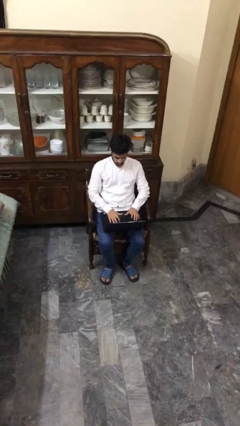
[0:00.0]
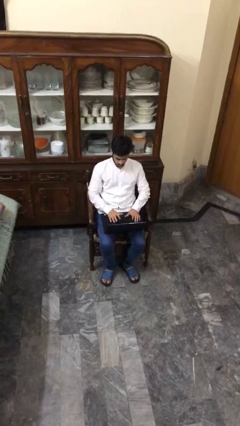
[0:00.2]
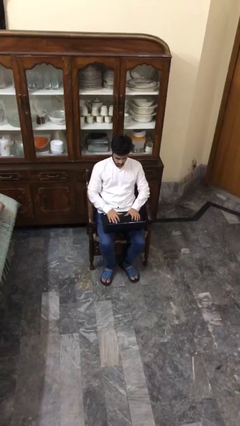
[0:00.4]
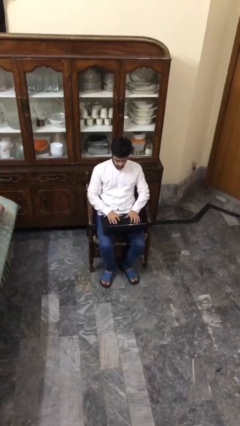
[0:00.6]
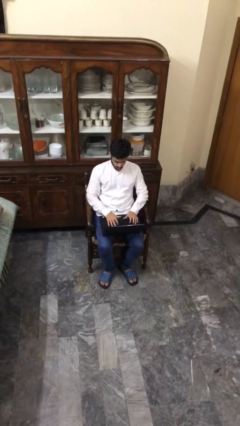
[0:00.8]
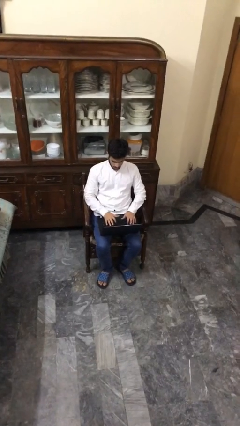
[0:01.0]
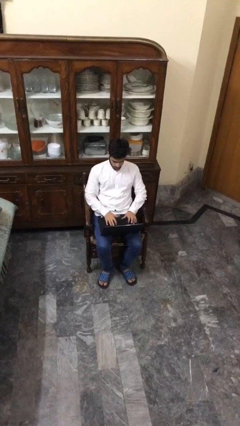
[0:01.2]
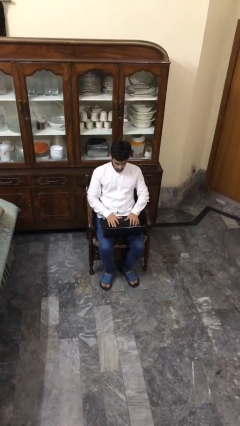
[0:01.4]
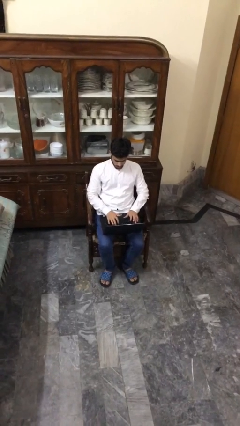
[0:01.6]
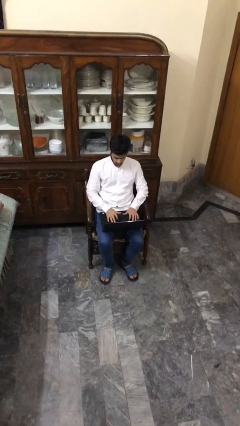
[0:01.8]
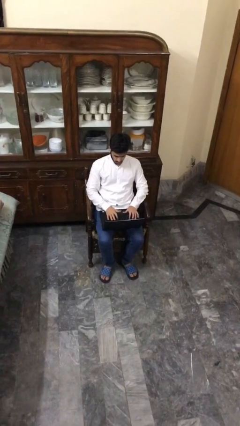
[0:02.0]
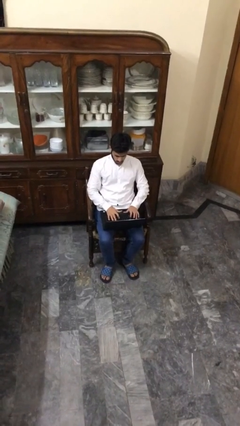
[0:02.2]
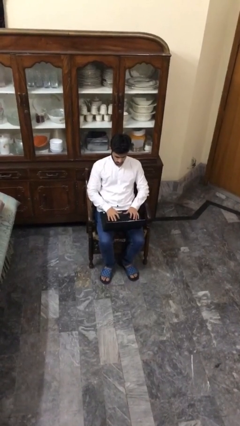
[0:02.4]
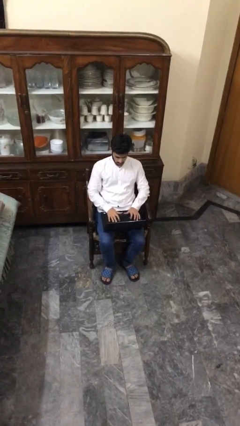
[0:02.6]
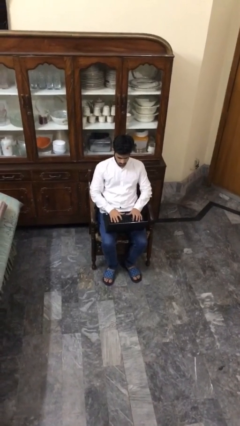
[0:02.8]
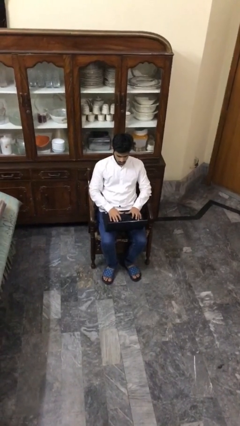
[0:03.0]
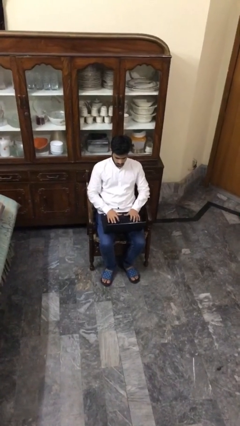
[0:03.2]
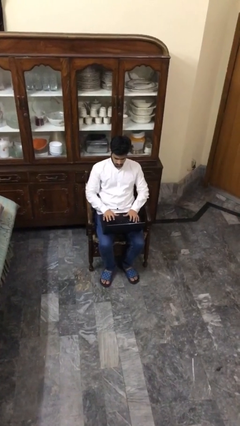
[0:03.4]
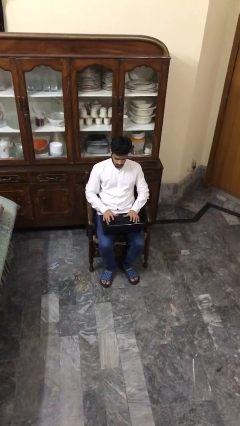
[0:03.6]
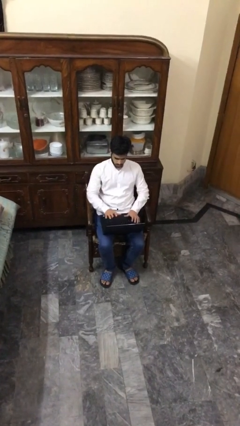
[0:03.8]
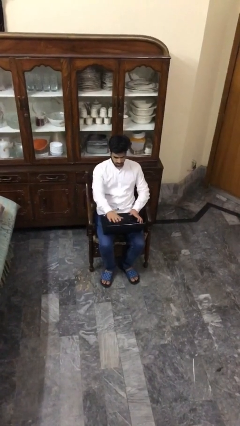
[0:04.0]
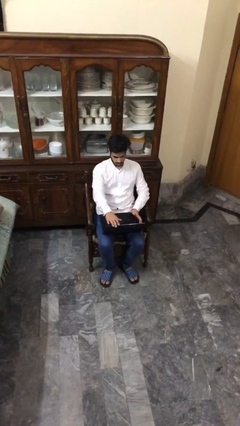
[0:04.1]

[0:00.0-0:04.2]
person interacts with laptop

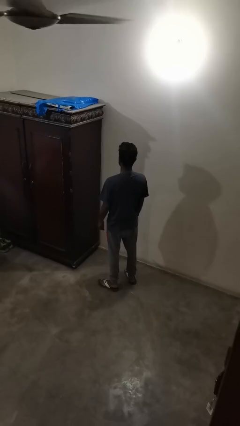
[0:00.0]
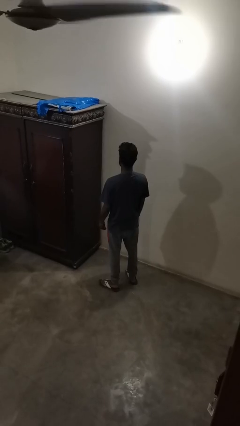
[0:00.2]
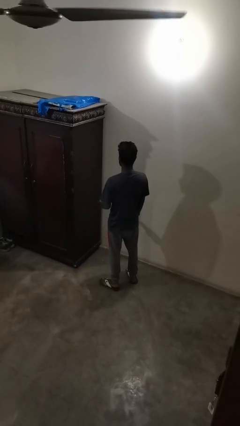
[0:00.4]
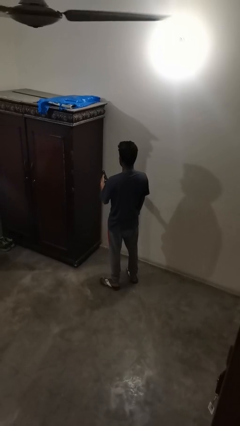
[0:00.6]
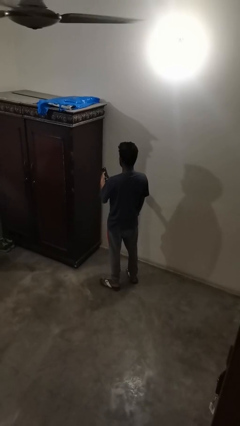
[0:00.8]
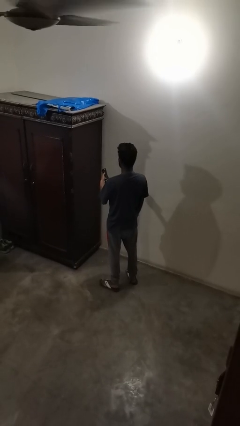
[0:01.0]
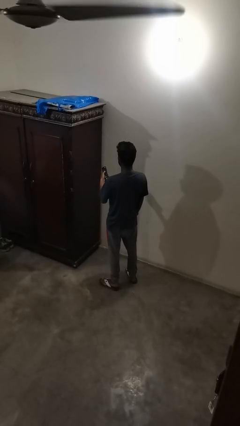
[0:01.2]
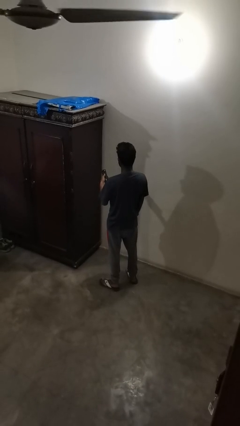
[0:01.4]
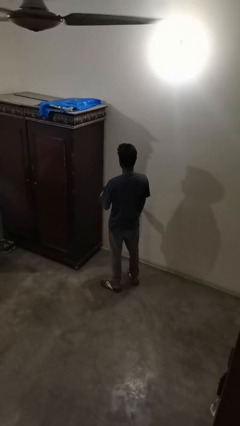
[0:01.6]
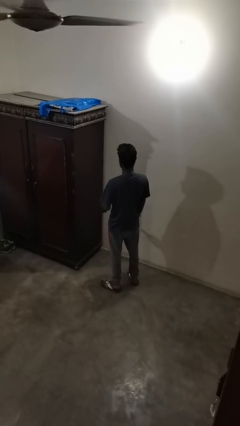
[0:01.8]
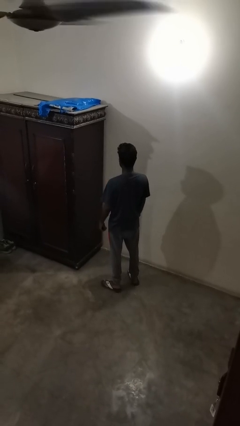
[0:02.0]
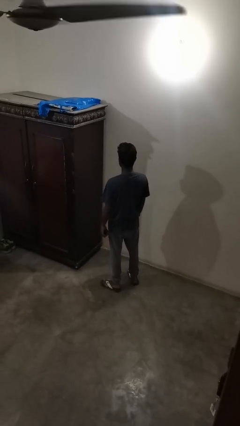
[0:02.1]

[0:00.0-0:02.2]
person uses television remote

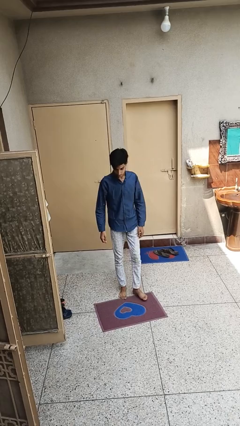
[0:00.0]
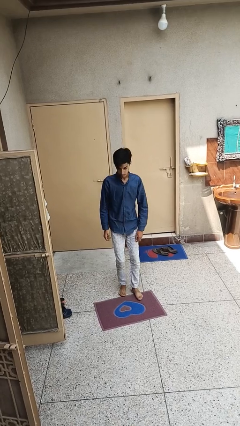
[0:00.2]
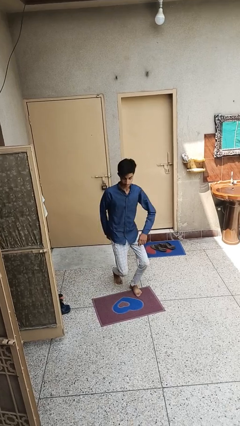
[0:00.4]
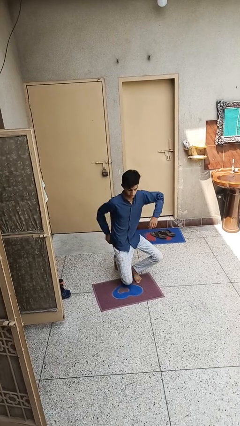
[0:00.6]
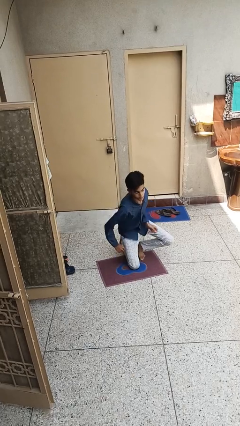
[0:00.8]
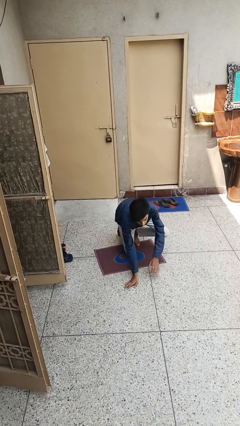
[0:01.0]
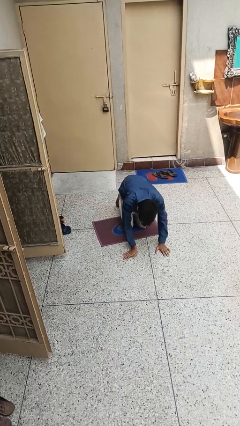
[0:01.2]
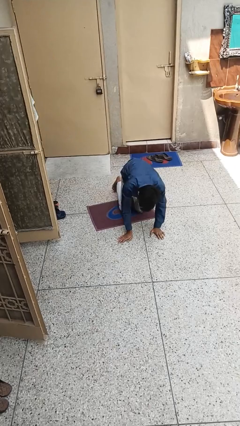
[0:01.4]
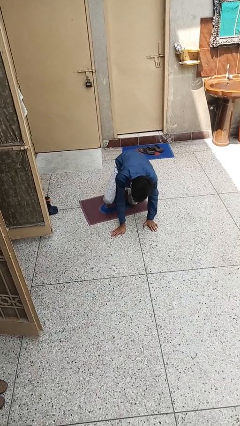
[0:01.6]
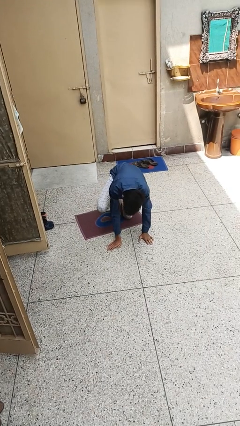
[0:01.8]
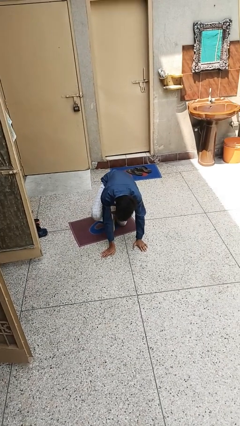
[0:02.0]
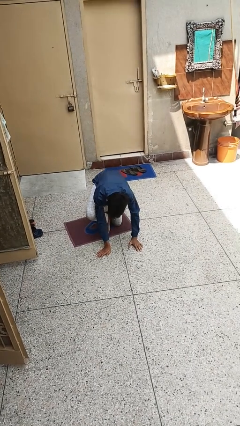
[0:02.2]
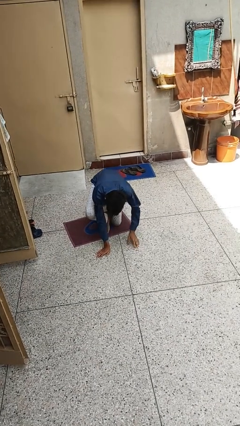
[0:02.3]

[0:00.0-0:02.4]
person trips on object on floor

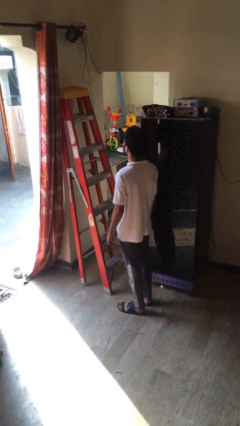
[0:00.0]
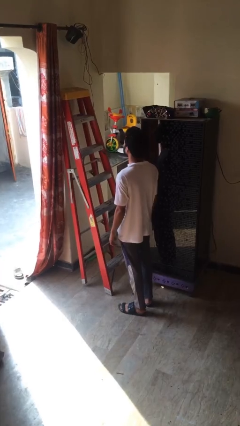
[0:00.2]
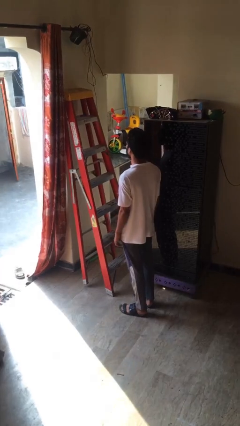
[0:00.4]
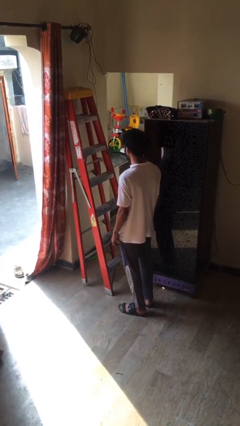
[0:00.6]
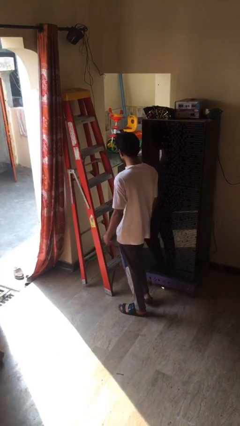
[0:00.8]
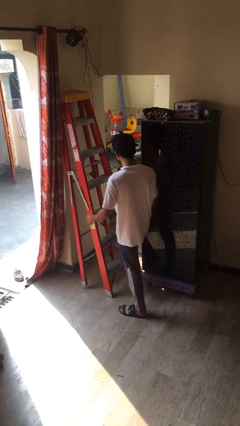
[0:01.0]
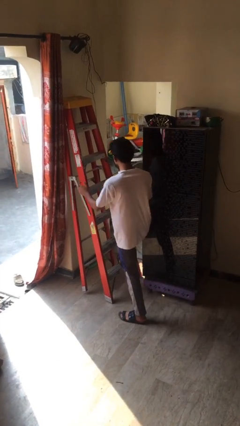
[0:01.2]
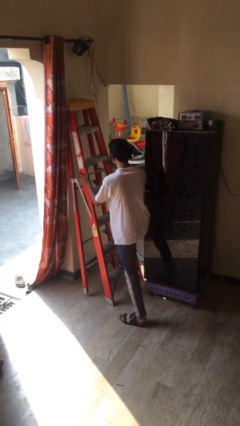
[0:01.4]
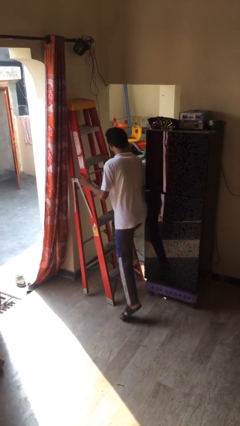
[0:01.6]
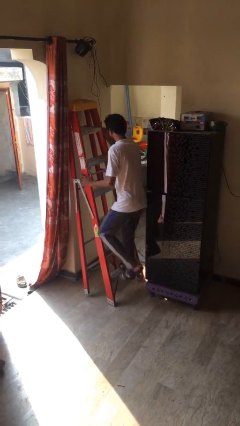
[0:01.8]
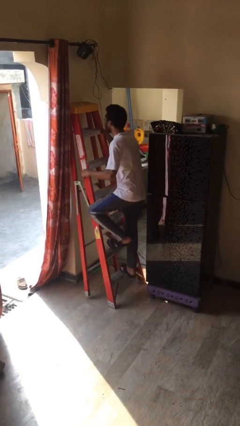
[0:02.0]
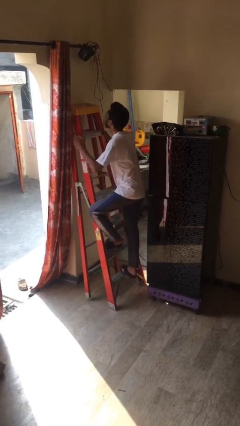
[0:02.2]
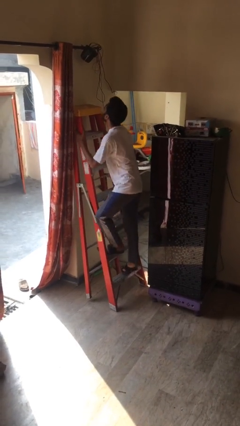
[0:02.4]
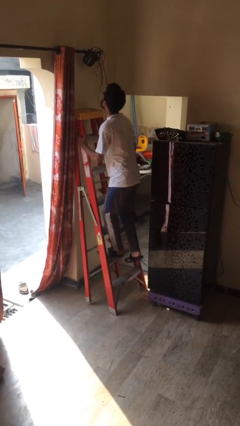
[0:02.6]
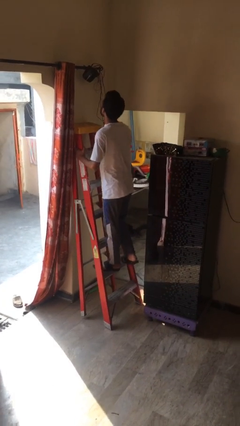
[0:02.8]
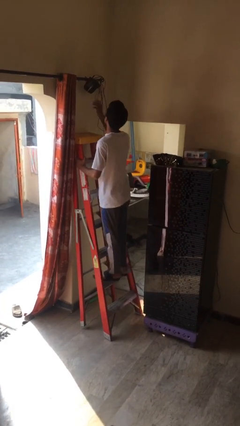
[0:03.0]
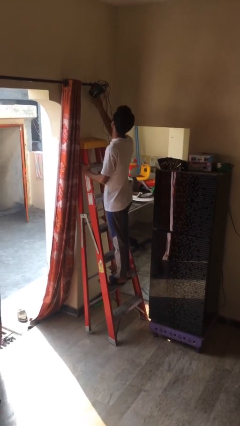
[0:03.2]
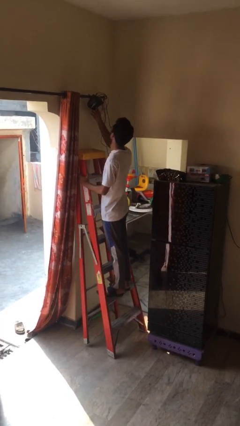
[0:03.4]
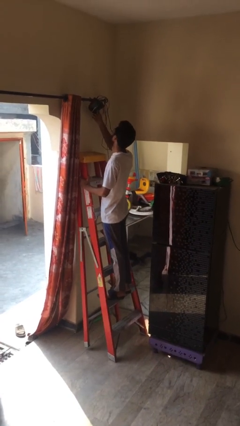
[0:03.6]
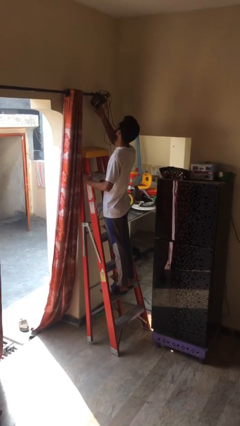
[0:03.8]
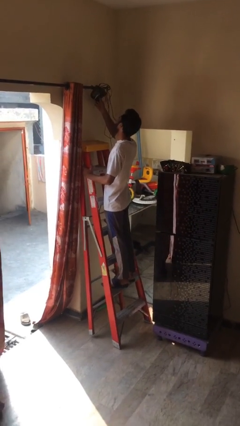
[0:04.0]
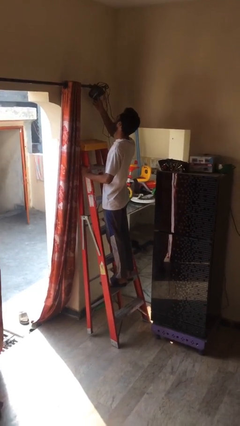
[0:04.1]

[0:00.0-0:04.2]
person climbs up ladder

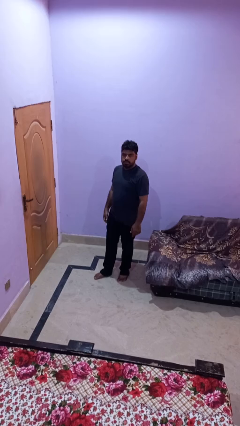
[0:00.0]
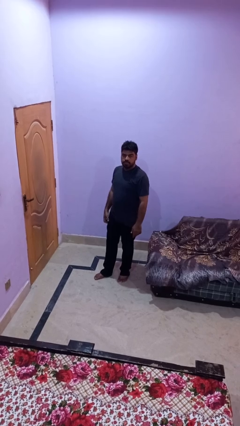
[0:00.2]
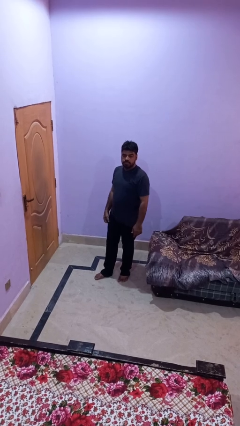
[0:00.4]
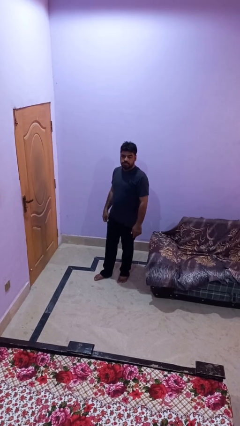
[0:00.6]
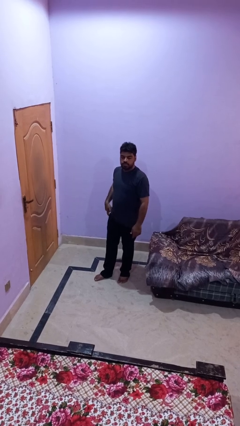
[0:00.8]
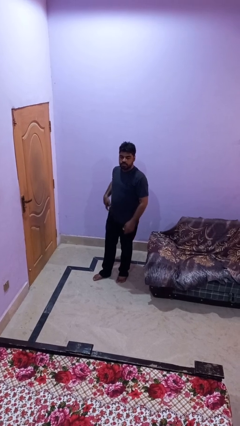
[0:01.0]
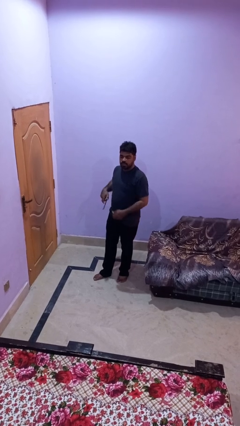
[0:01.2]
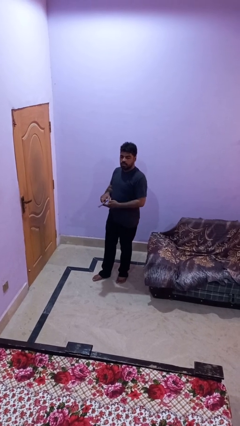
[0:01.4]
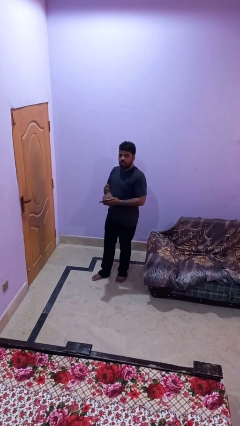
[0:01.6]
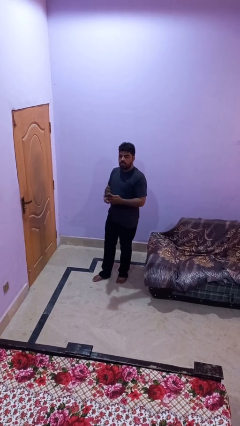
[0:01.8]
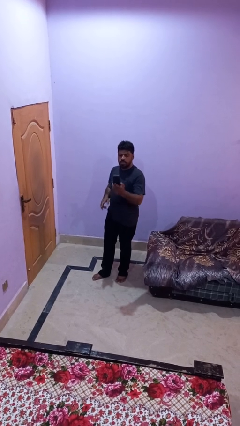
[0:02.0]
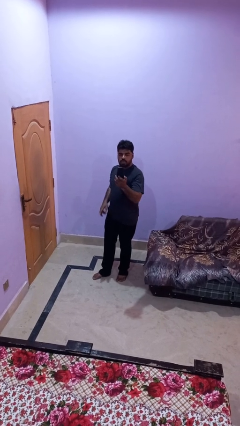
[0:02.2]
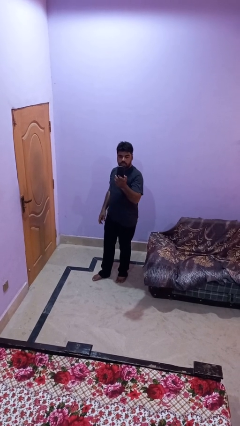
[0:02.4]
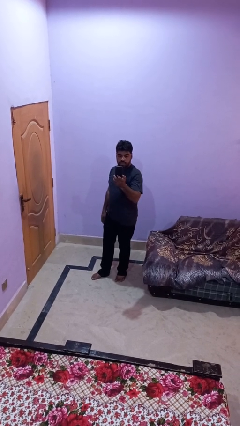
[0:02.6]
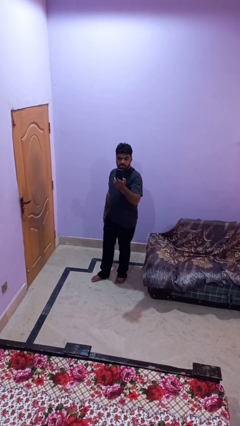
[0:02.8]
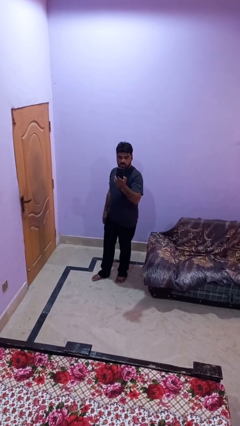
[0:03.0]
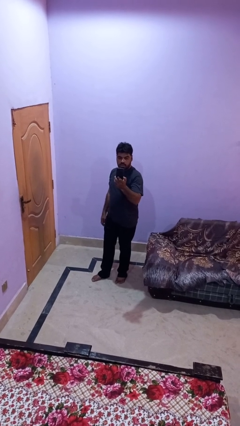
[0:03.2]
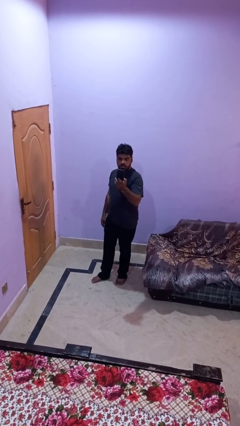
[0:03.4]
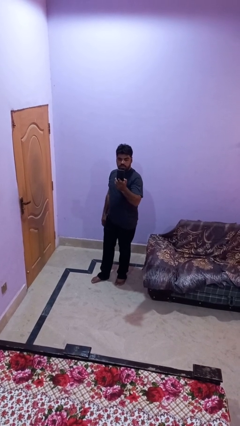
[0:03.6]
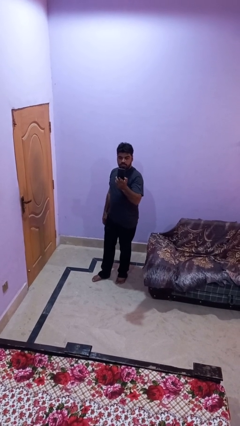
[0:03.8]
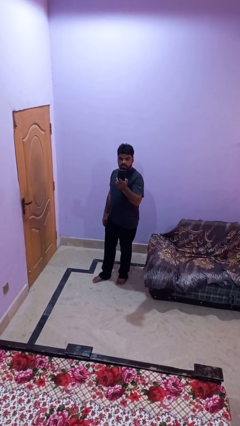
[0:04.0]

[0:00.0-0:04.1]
person takes phone from pocket
